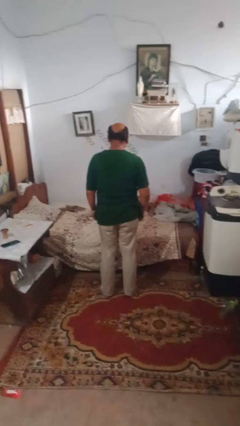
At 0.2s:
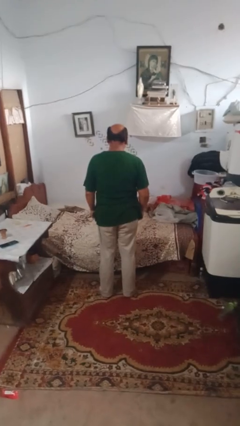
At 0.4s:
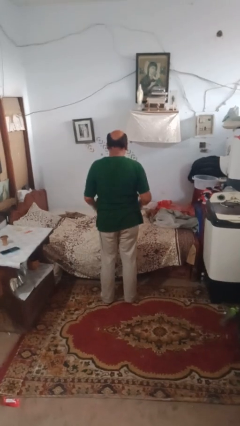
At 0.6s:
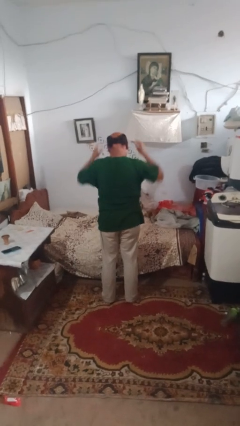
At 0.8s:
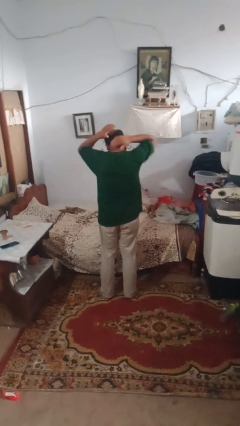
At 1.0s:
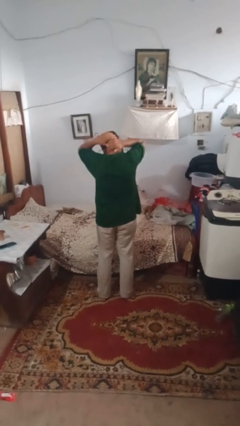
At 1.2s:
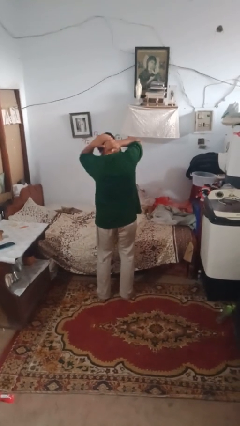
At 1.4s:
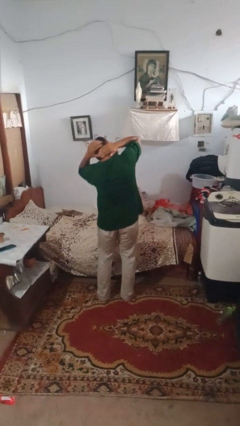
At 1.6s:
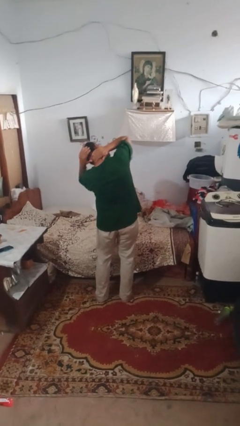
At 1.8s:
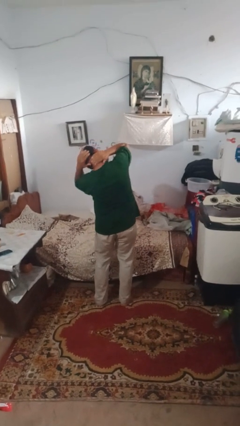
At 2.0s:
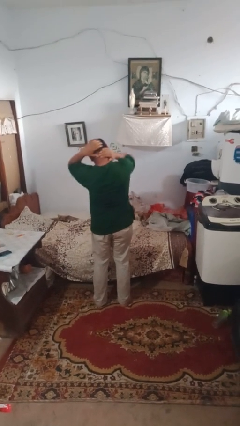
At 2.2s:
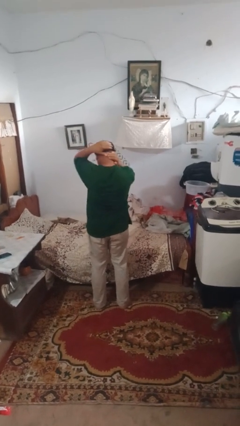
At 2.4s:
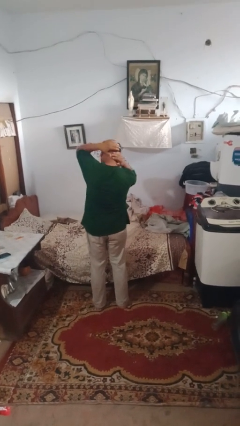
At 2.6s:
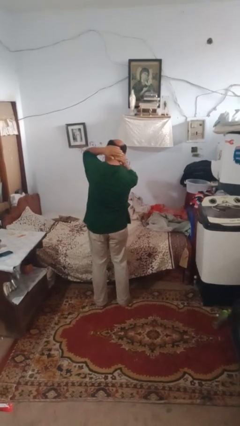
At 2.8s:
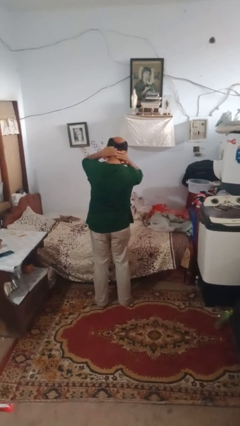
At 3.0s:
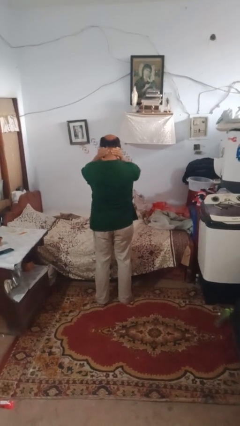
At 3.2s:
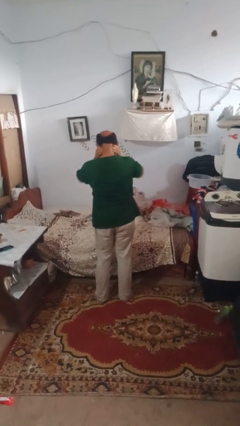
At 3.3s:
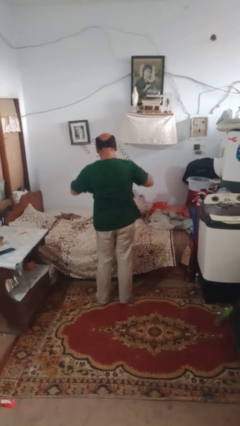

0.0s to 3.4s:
person rubs neck

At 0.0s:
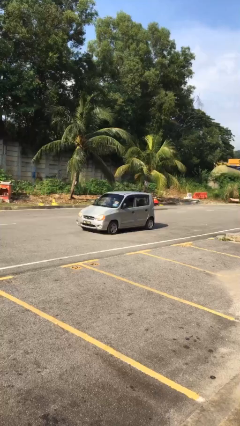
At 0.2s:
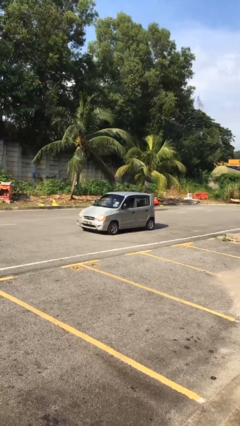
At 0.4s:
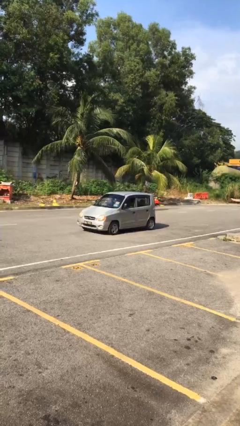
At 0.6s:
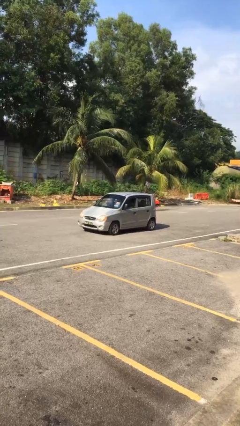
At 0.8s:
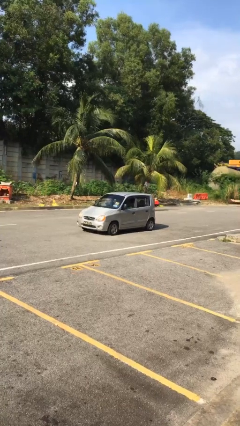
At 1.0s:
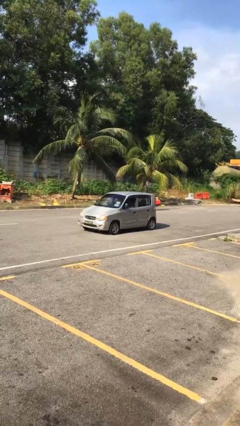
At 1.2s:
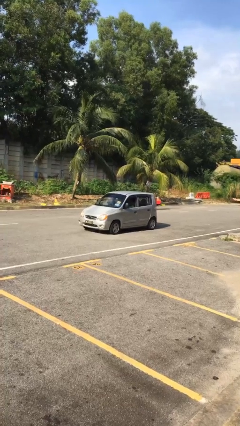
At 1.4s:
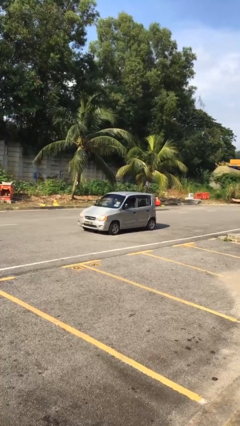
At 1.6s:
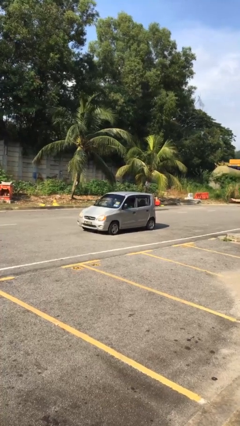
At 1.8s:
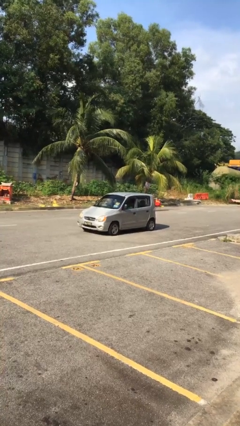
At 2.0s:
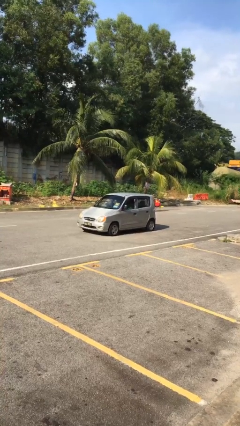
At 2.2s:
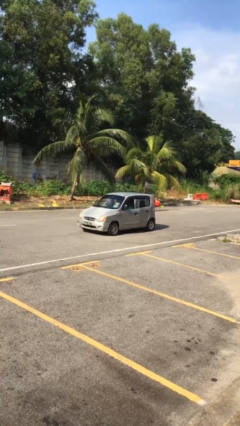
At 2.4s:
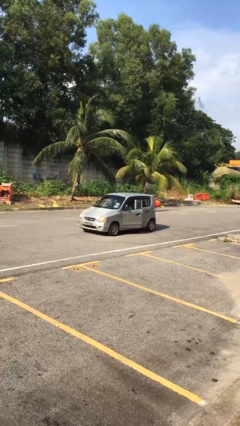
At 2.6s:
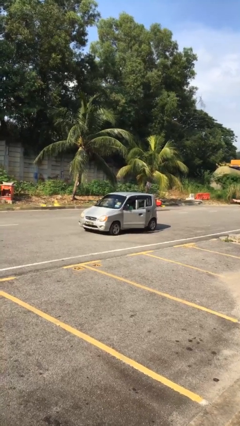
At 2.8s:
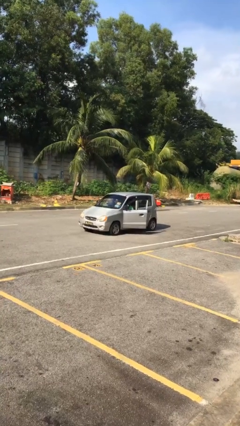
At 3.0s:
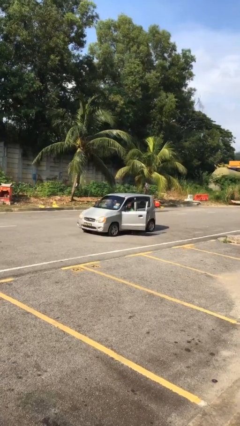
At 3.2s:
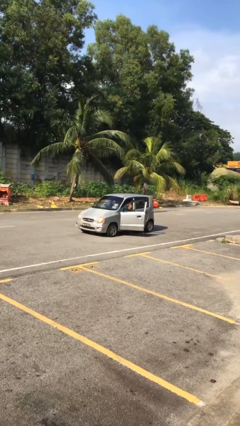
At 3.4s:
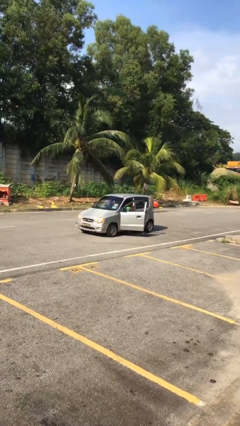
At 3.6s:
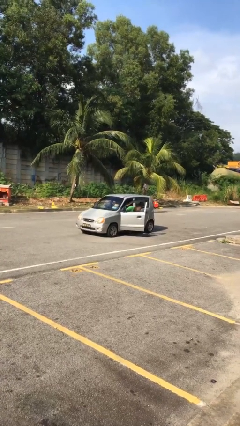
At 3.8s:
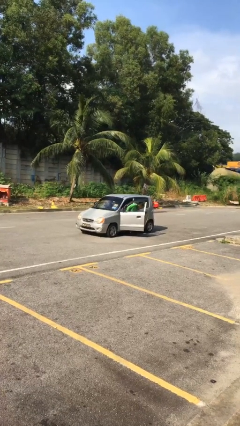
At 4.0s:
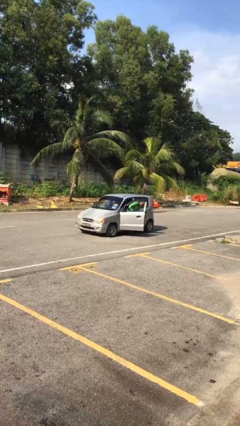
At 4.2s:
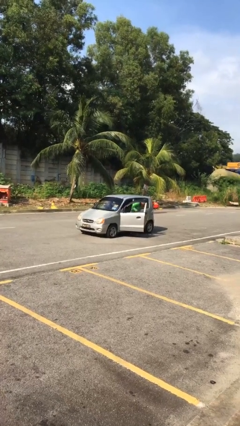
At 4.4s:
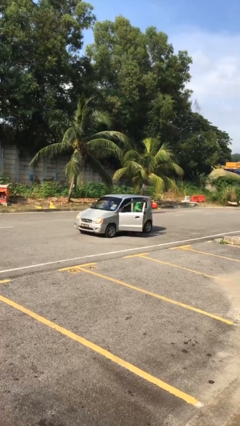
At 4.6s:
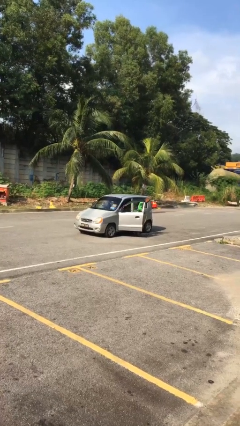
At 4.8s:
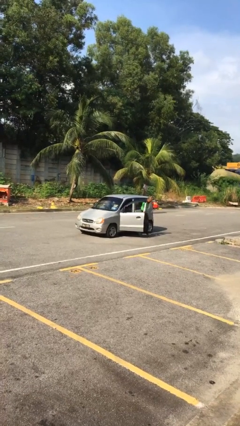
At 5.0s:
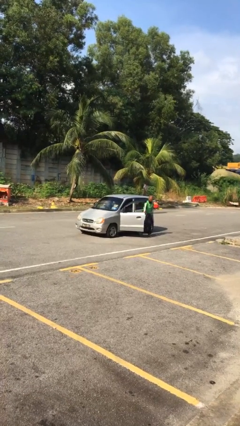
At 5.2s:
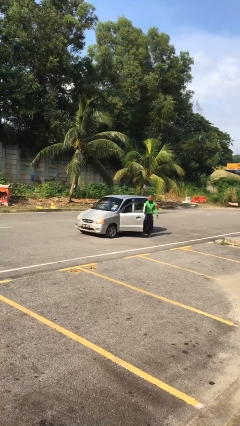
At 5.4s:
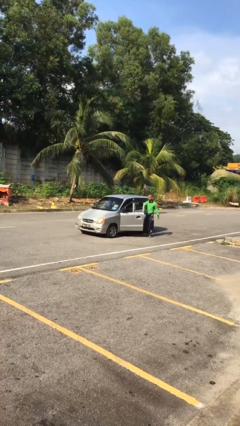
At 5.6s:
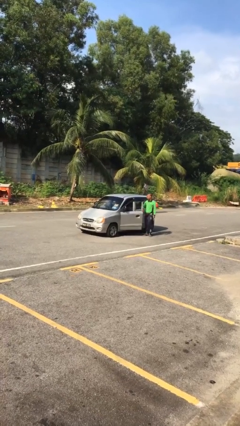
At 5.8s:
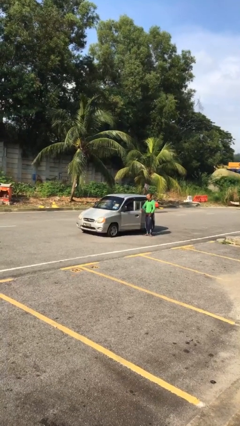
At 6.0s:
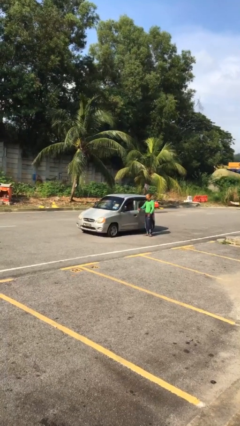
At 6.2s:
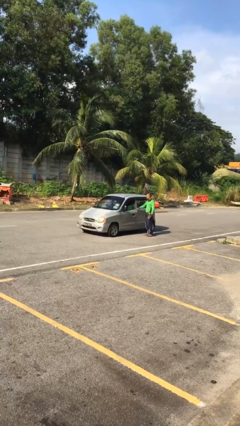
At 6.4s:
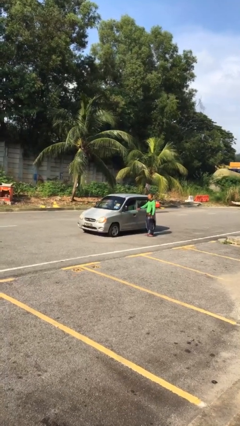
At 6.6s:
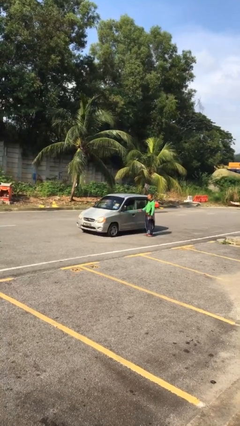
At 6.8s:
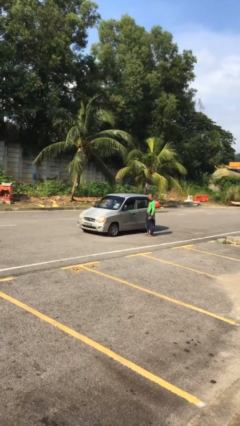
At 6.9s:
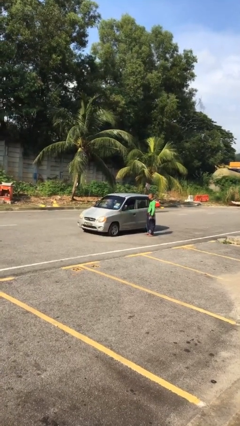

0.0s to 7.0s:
car drops off person

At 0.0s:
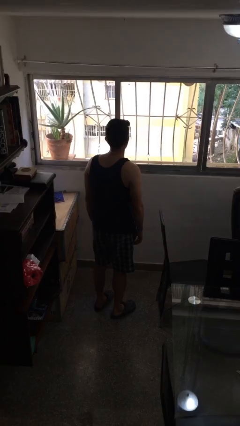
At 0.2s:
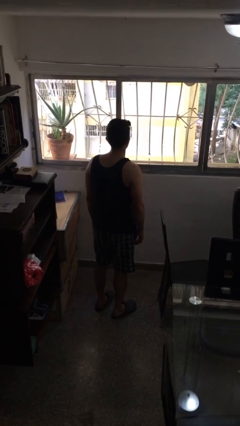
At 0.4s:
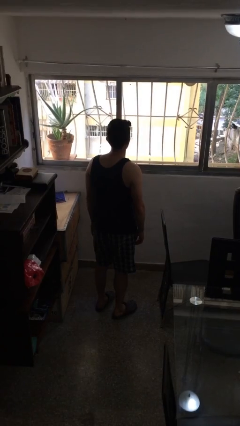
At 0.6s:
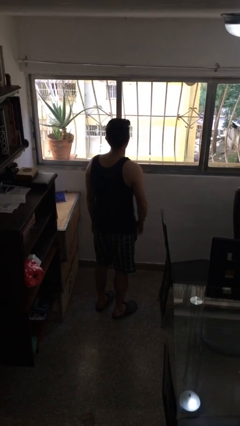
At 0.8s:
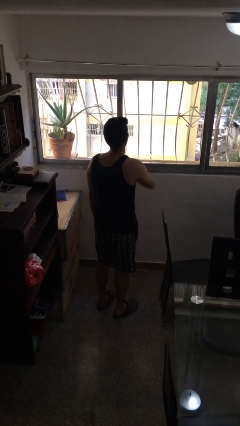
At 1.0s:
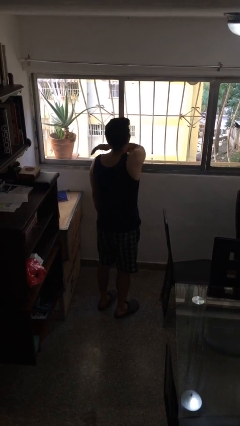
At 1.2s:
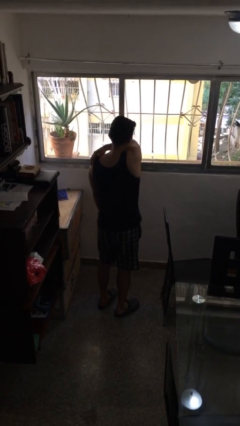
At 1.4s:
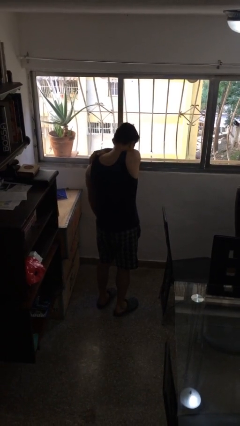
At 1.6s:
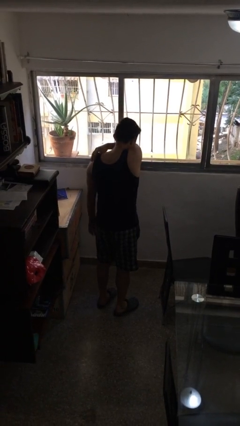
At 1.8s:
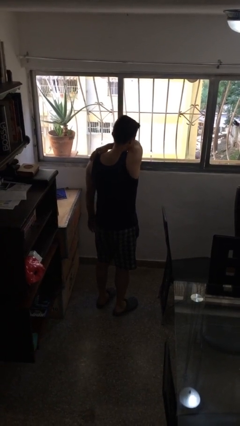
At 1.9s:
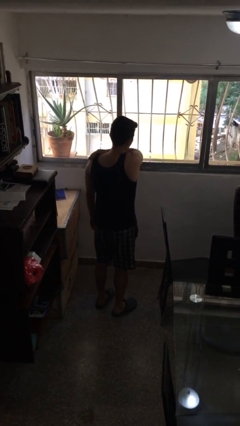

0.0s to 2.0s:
person sneezes into arm

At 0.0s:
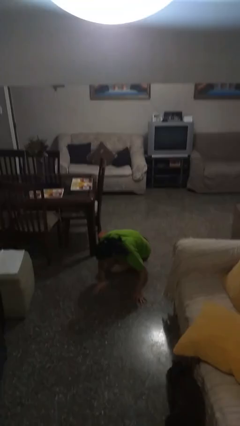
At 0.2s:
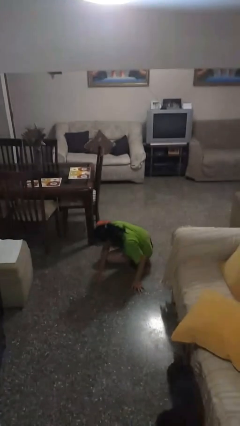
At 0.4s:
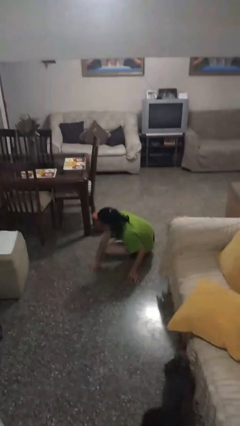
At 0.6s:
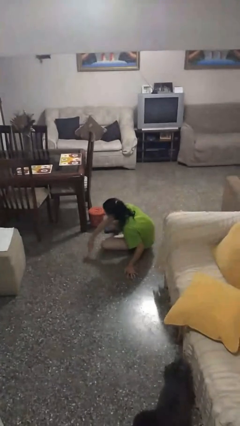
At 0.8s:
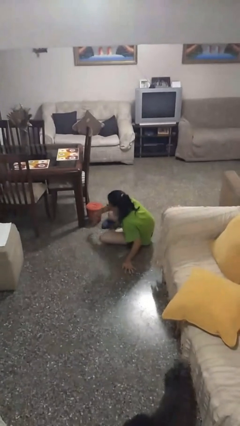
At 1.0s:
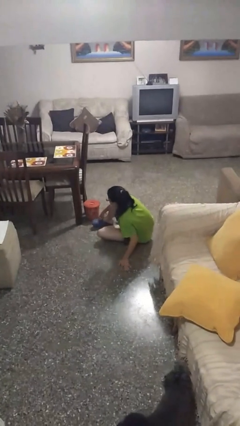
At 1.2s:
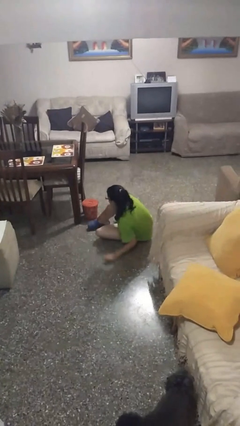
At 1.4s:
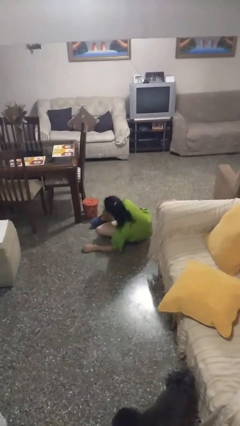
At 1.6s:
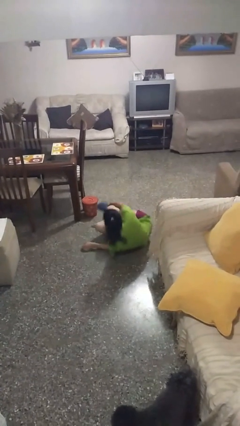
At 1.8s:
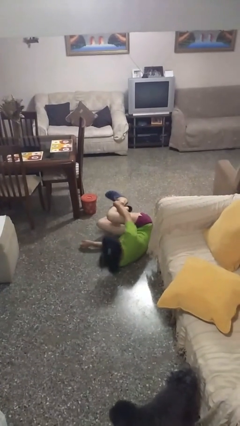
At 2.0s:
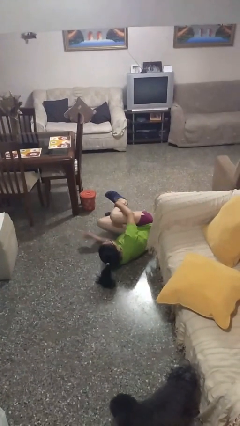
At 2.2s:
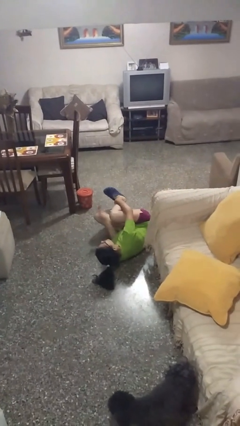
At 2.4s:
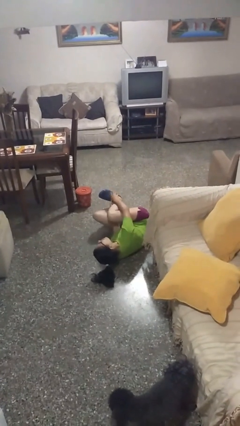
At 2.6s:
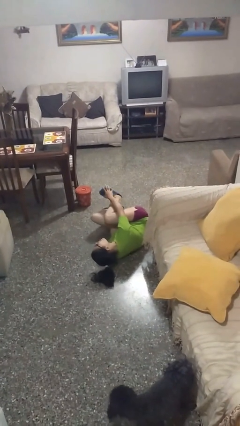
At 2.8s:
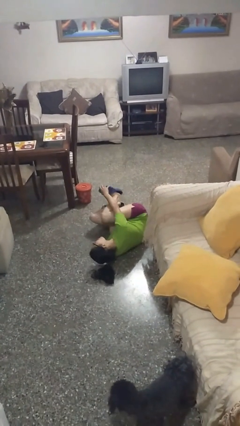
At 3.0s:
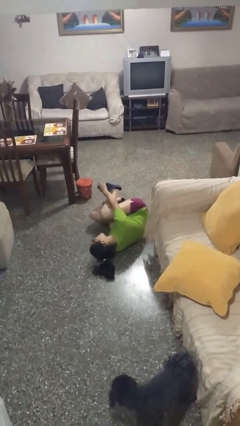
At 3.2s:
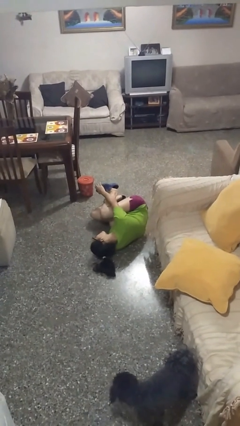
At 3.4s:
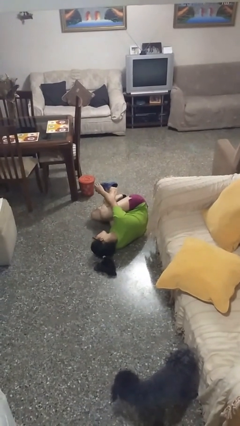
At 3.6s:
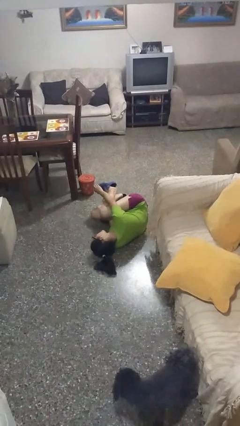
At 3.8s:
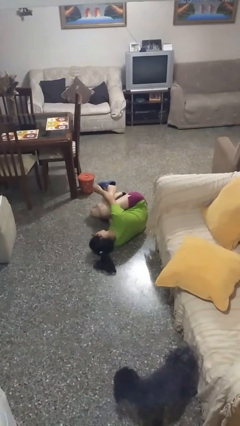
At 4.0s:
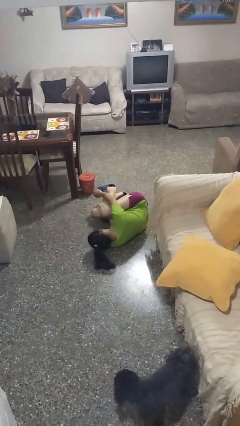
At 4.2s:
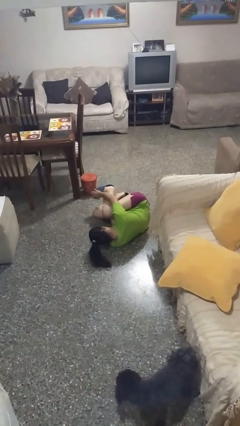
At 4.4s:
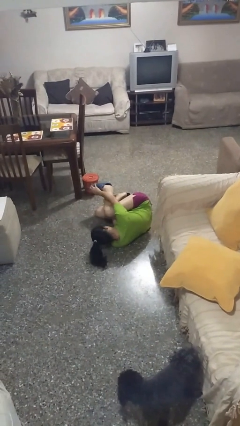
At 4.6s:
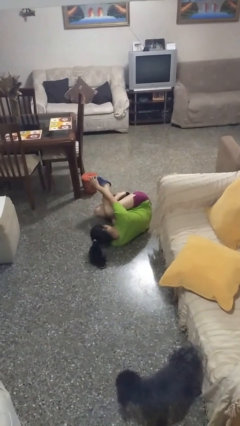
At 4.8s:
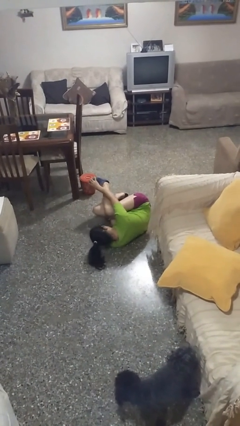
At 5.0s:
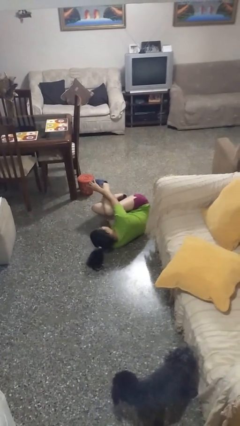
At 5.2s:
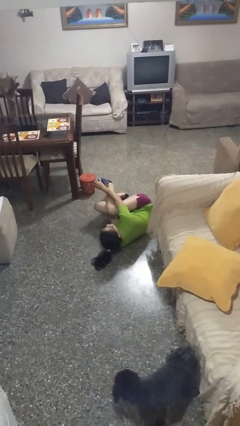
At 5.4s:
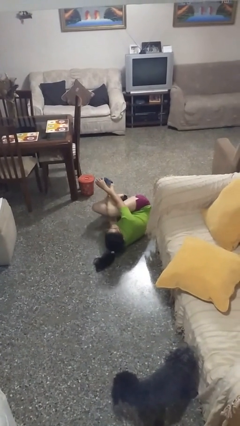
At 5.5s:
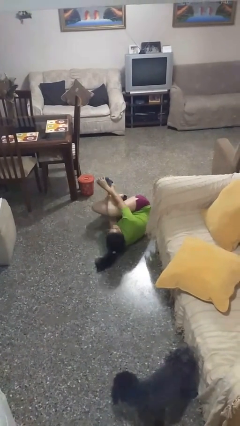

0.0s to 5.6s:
person lies down on floor
